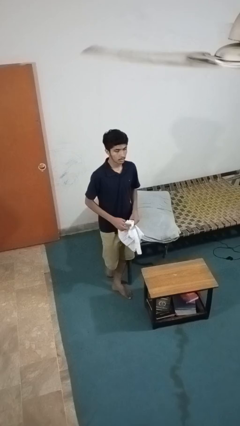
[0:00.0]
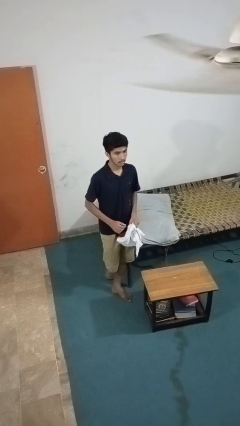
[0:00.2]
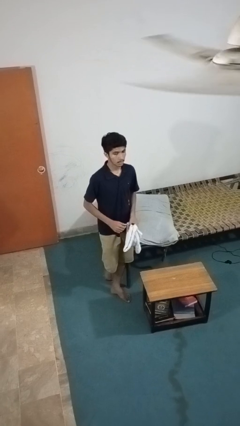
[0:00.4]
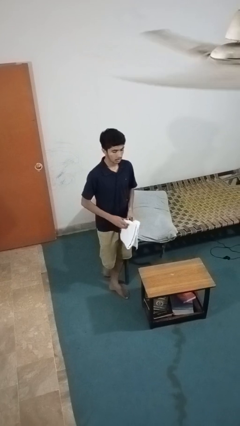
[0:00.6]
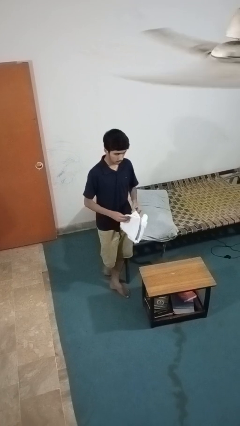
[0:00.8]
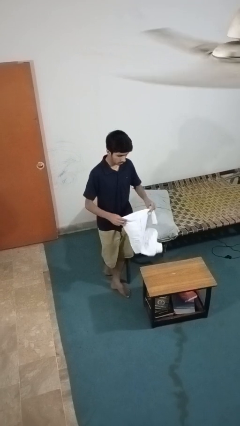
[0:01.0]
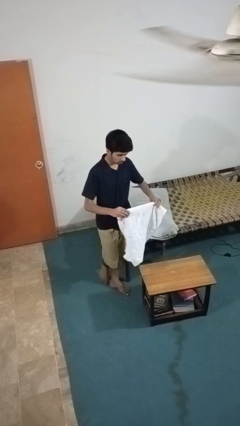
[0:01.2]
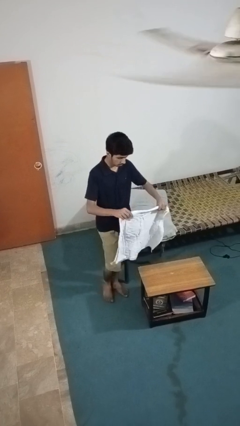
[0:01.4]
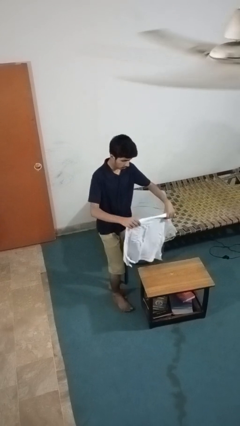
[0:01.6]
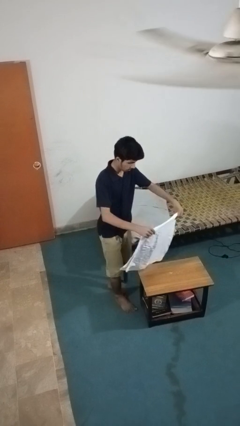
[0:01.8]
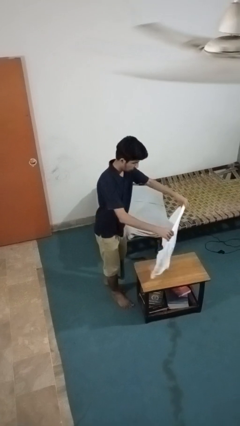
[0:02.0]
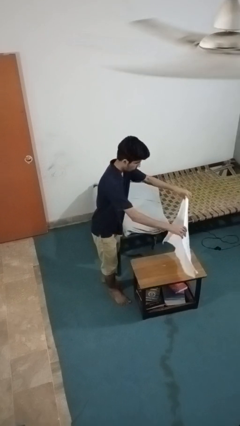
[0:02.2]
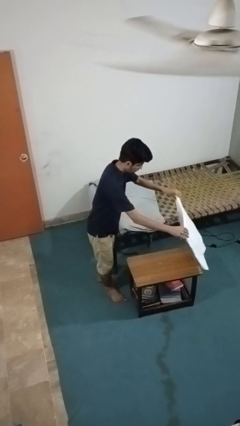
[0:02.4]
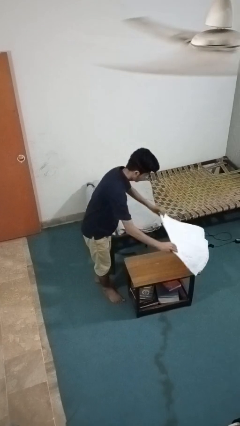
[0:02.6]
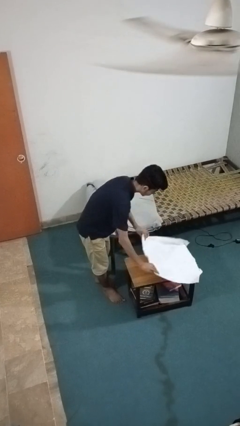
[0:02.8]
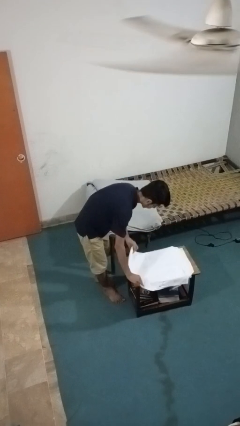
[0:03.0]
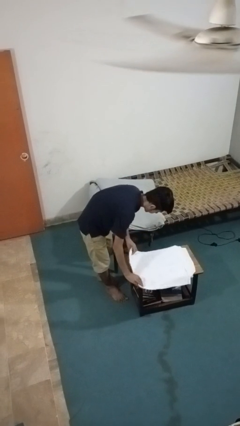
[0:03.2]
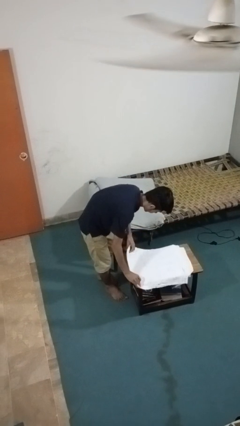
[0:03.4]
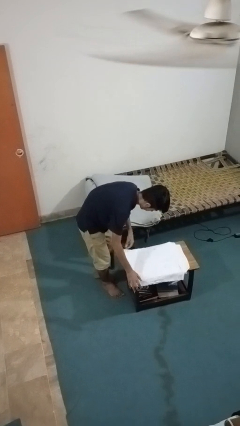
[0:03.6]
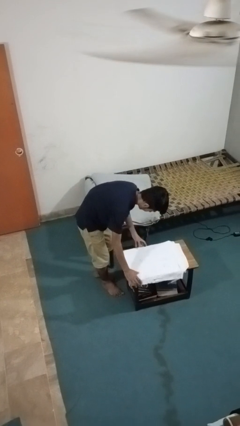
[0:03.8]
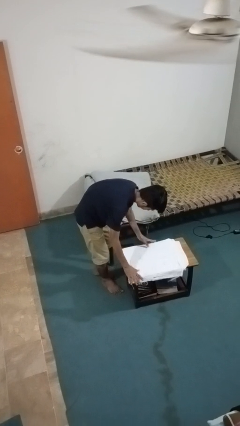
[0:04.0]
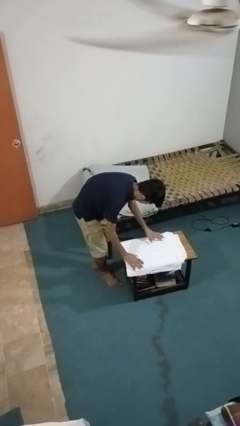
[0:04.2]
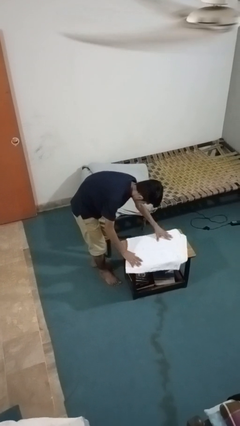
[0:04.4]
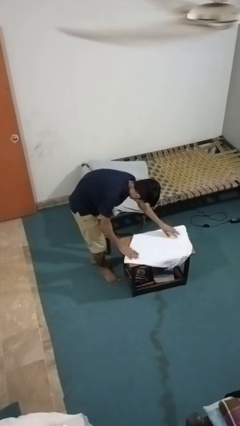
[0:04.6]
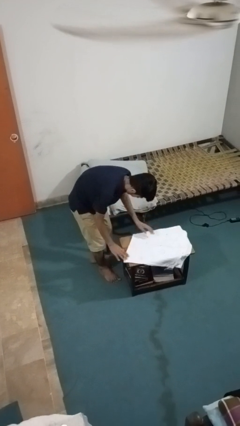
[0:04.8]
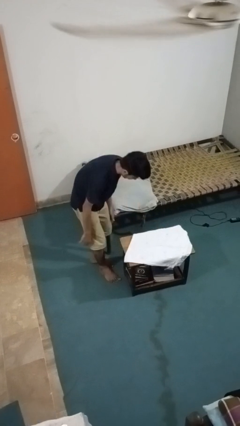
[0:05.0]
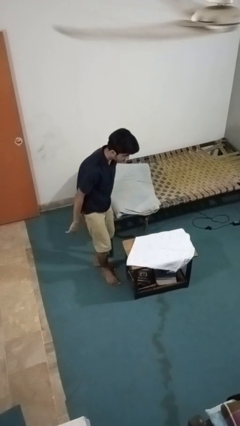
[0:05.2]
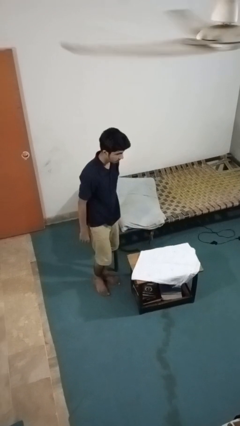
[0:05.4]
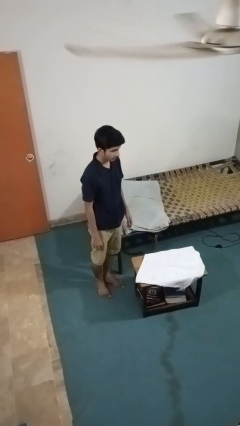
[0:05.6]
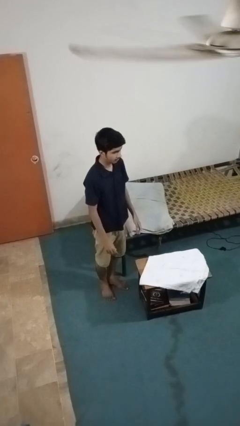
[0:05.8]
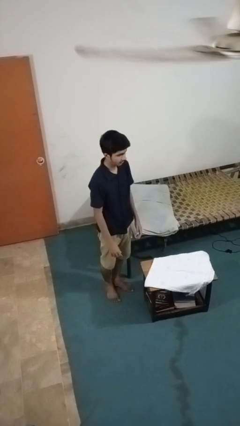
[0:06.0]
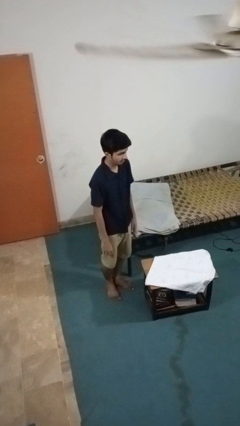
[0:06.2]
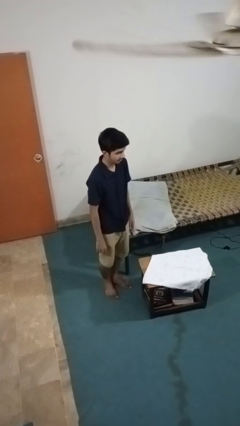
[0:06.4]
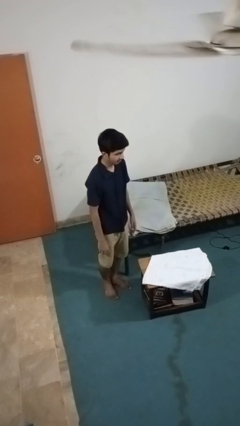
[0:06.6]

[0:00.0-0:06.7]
person spreads tablecloth

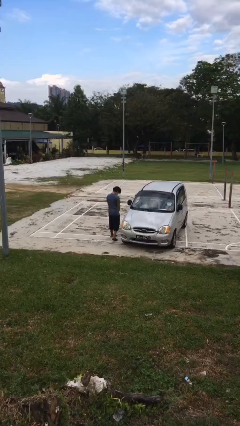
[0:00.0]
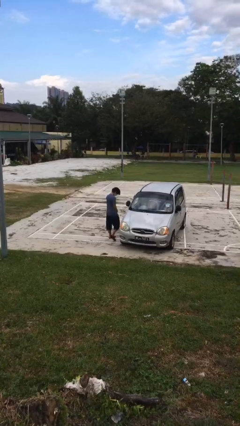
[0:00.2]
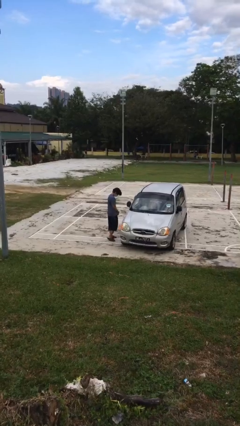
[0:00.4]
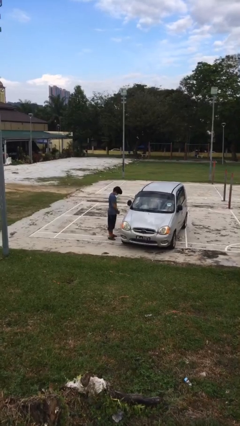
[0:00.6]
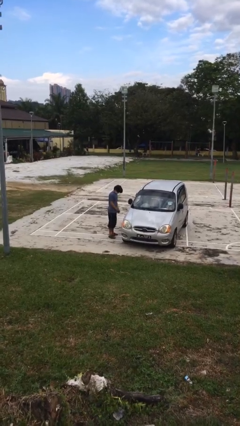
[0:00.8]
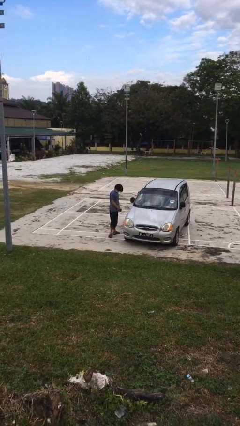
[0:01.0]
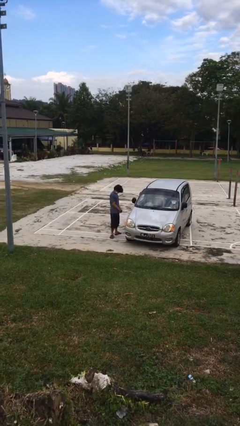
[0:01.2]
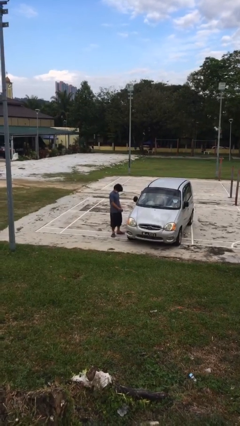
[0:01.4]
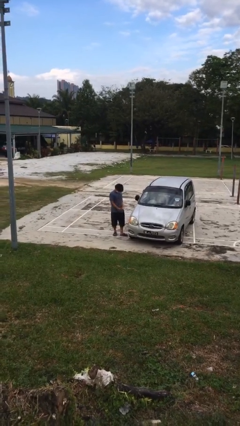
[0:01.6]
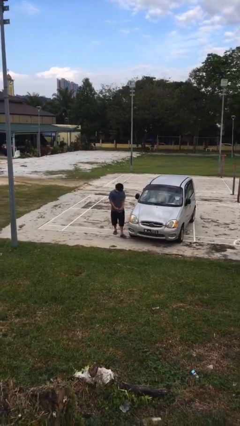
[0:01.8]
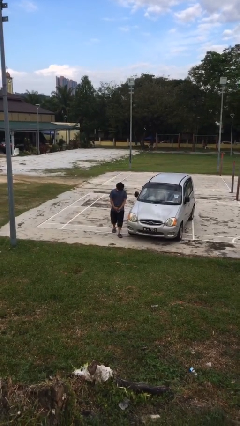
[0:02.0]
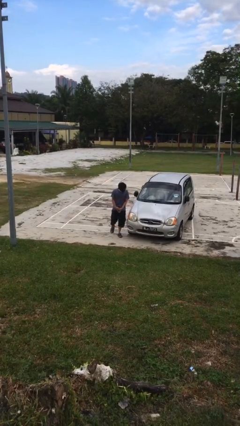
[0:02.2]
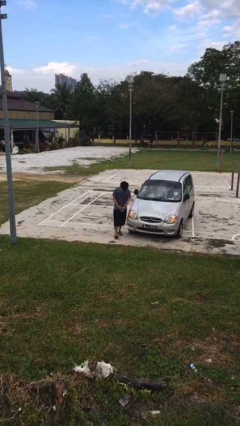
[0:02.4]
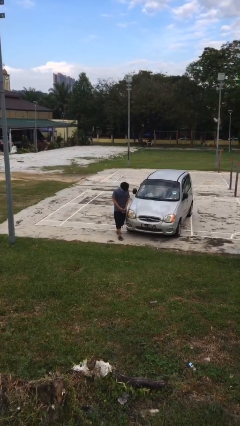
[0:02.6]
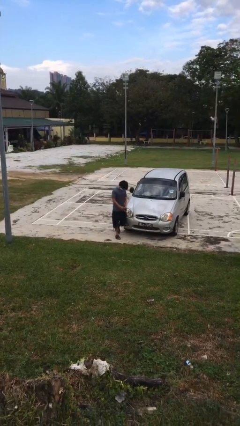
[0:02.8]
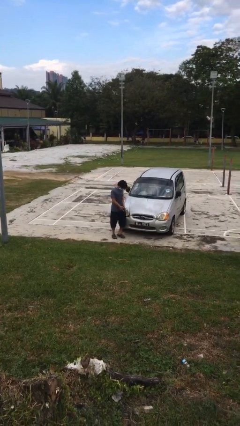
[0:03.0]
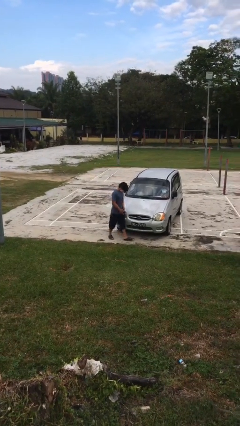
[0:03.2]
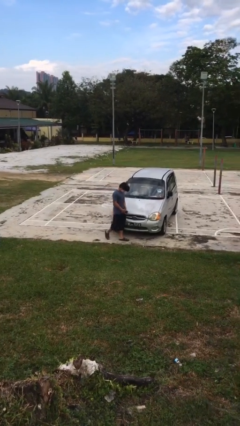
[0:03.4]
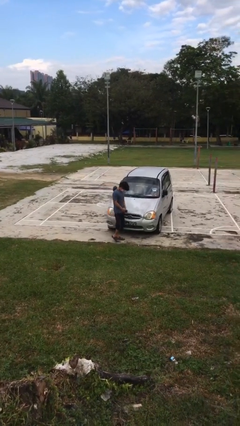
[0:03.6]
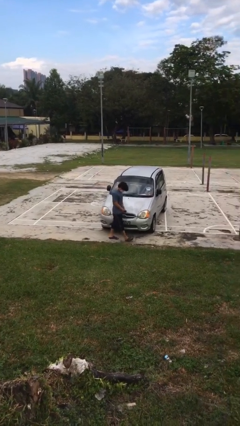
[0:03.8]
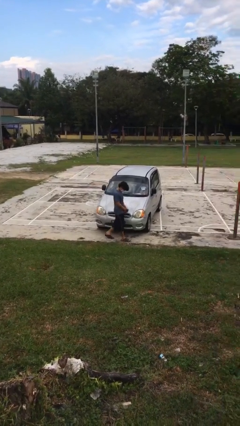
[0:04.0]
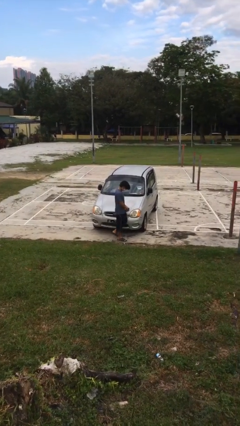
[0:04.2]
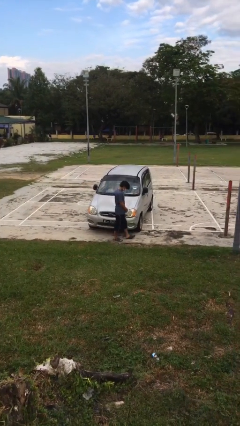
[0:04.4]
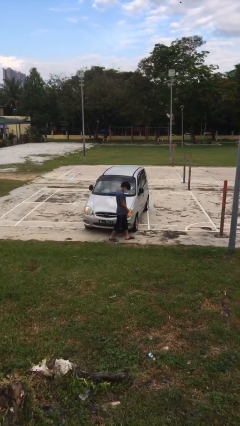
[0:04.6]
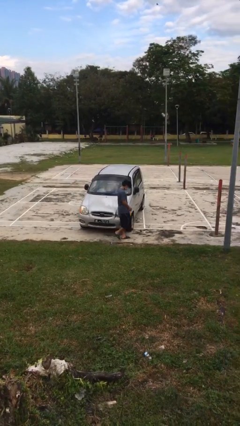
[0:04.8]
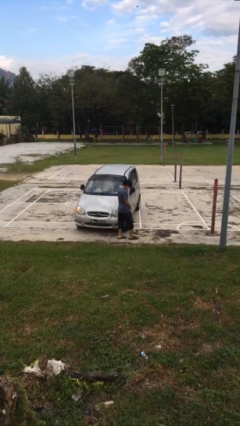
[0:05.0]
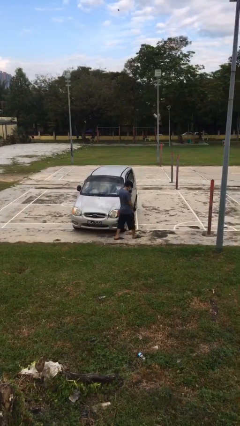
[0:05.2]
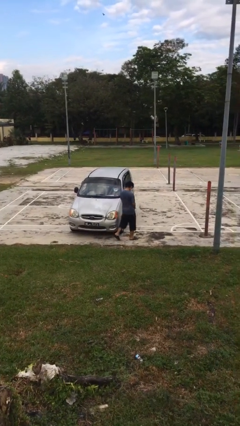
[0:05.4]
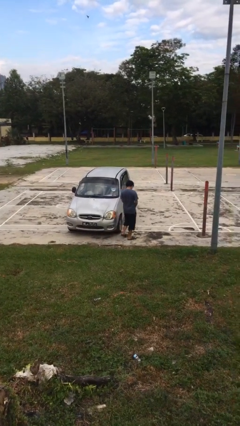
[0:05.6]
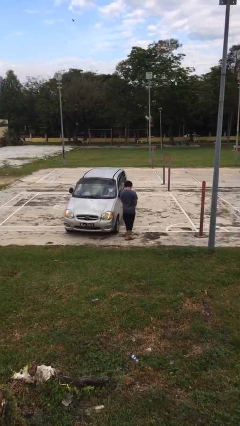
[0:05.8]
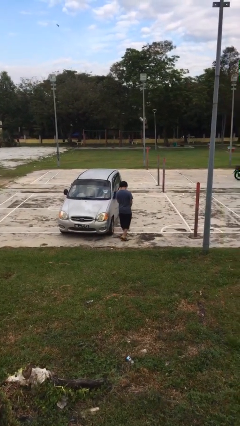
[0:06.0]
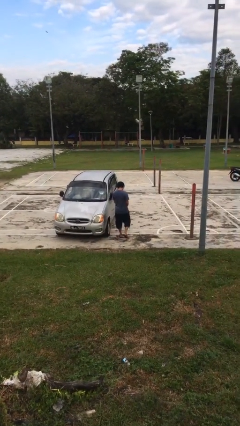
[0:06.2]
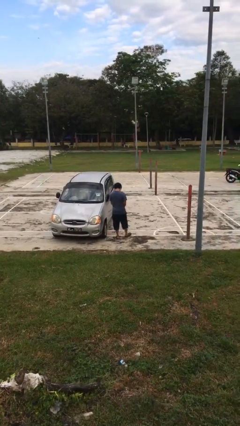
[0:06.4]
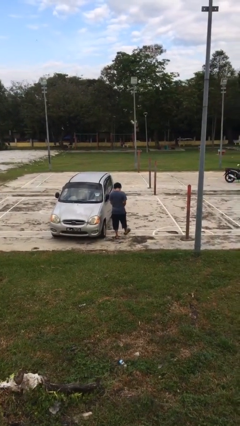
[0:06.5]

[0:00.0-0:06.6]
person walks around car

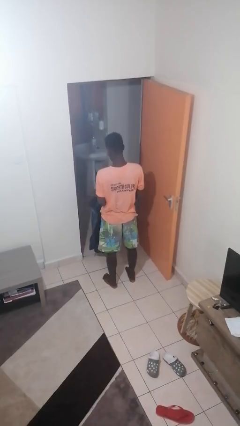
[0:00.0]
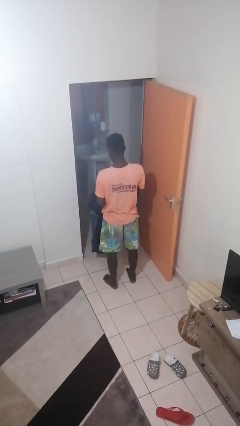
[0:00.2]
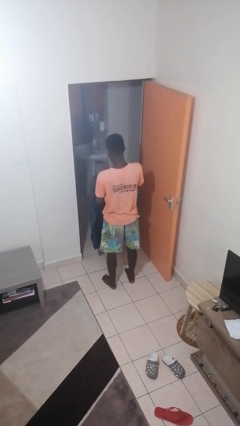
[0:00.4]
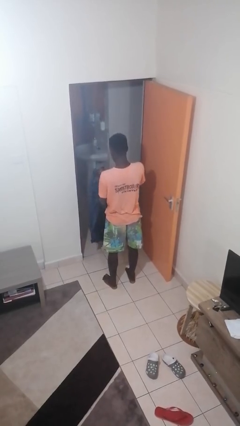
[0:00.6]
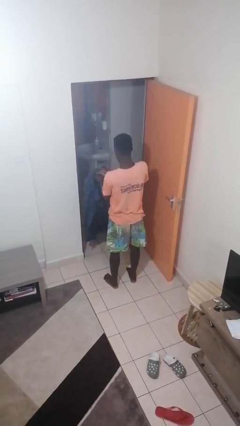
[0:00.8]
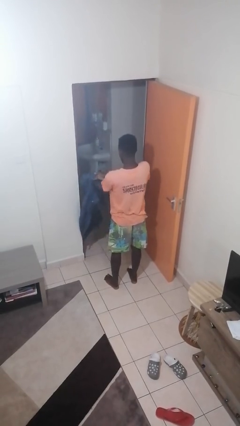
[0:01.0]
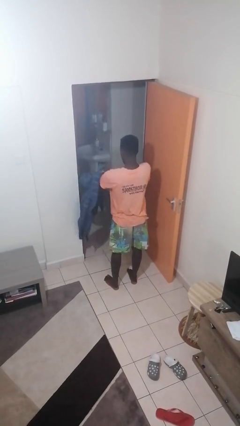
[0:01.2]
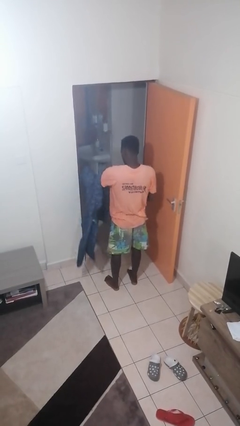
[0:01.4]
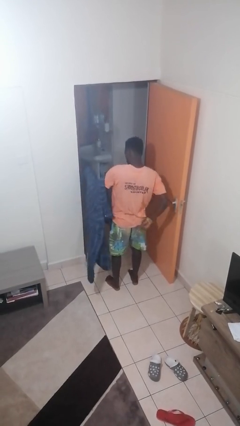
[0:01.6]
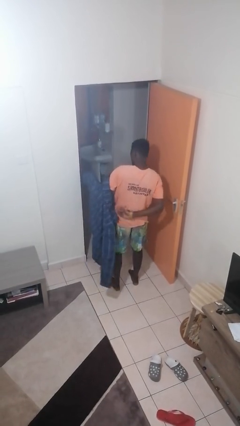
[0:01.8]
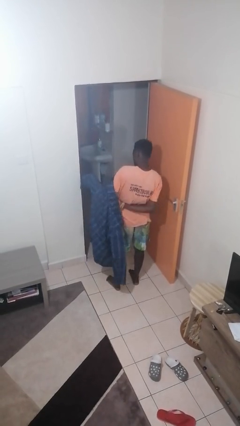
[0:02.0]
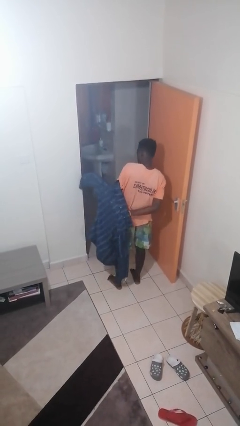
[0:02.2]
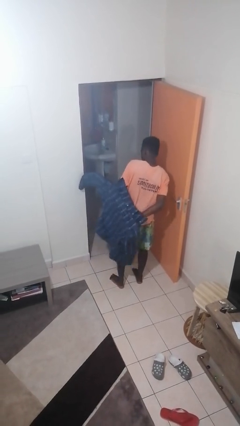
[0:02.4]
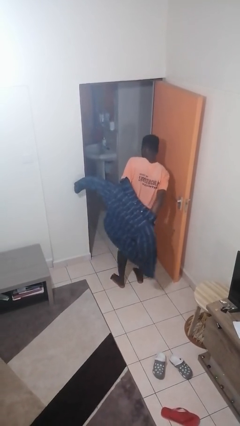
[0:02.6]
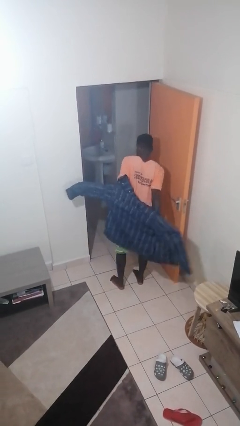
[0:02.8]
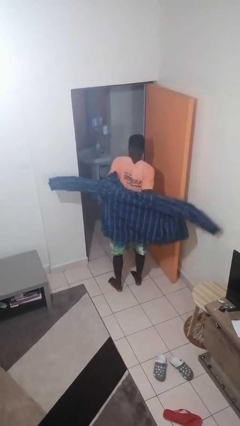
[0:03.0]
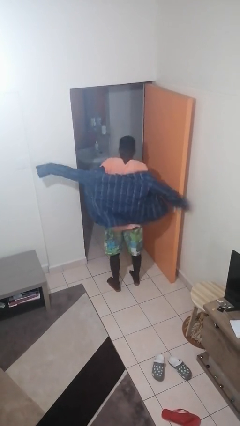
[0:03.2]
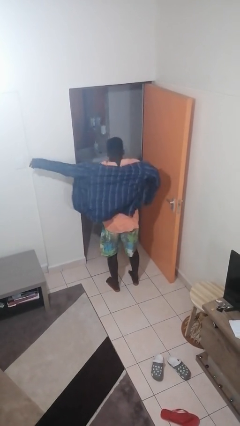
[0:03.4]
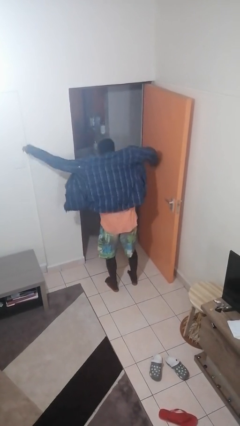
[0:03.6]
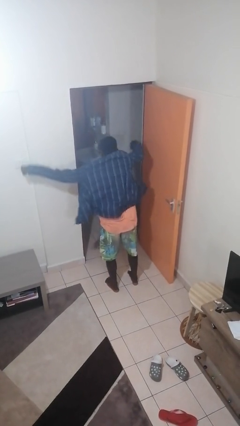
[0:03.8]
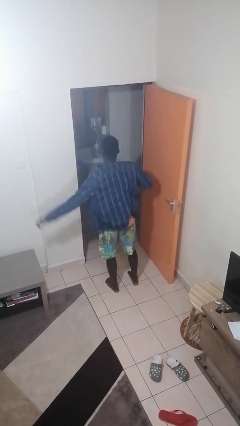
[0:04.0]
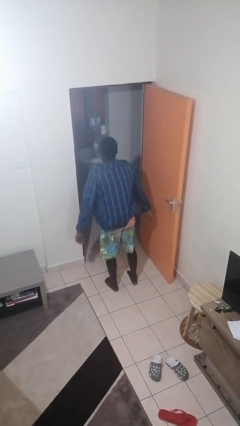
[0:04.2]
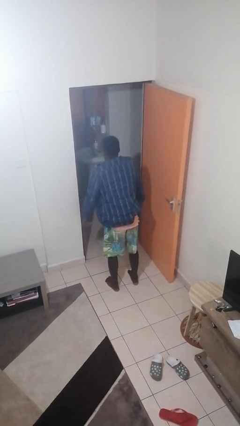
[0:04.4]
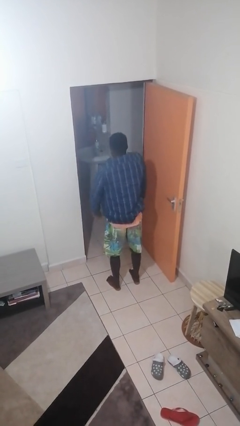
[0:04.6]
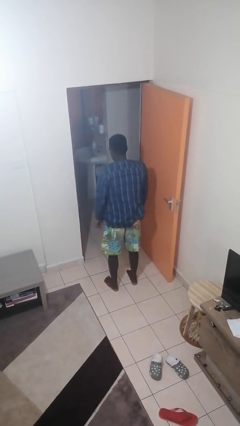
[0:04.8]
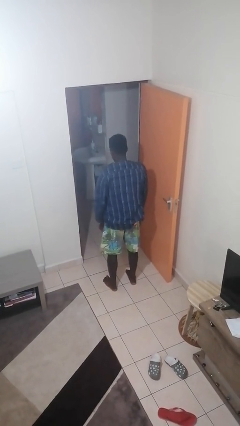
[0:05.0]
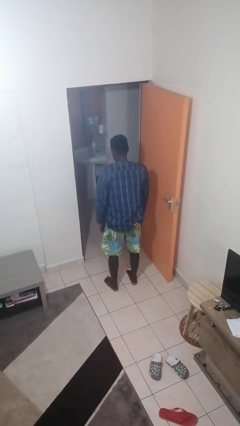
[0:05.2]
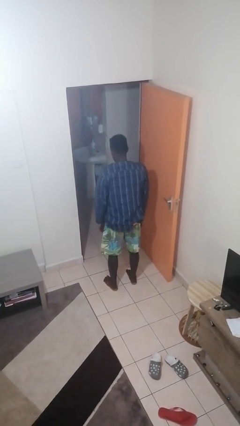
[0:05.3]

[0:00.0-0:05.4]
person puts on jacket
